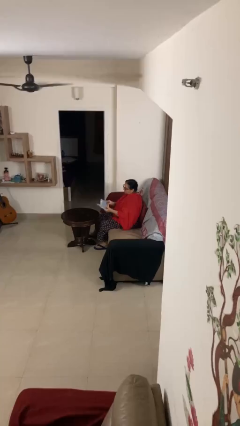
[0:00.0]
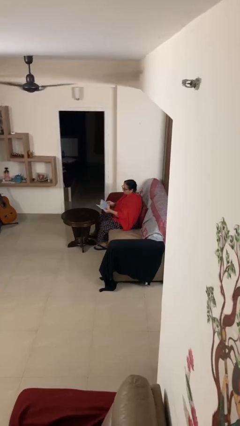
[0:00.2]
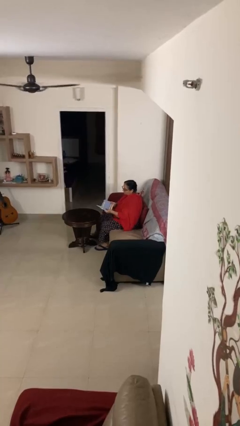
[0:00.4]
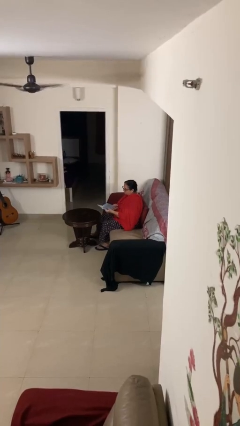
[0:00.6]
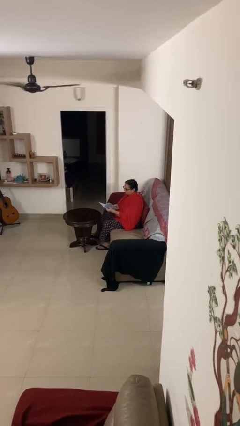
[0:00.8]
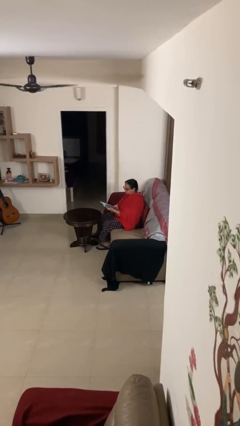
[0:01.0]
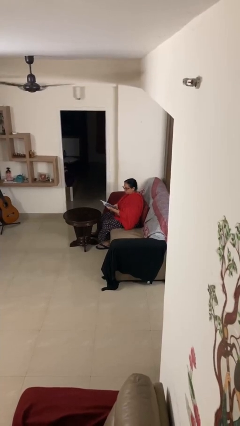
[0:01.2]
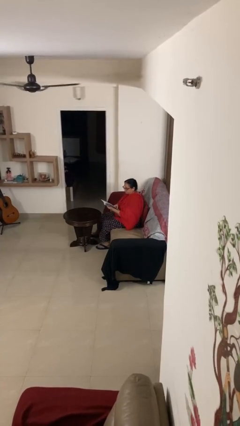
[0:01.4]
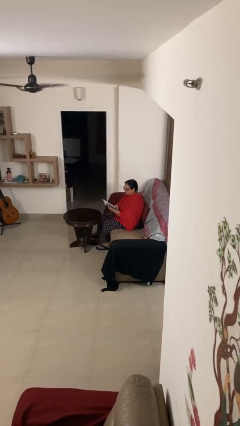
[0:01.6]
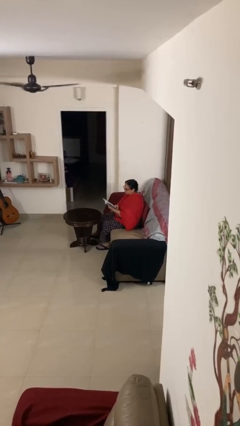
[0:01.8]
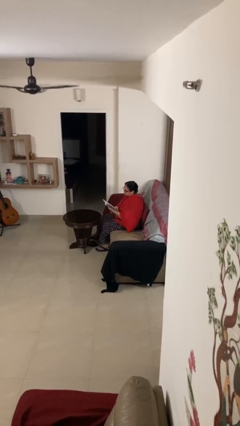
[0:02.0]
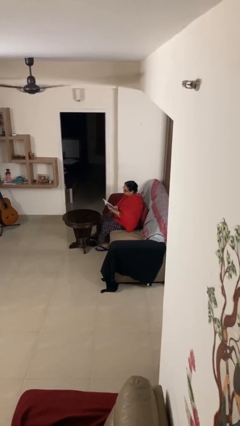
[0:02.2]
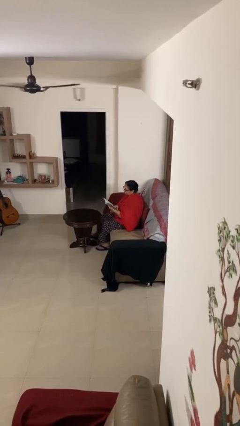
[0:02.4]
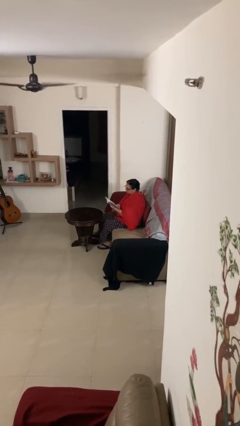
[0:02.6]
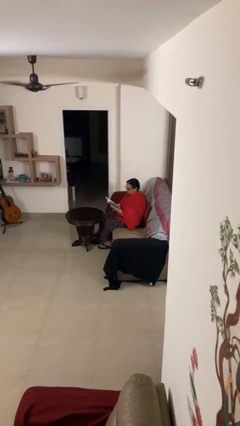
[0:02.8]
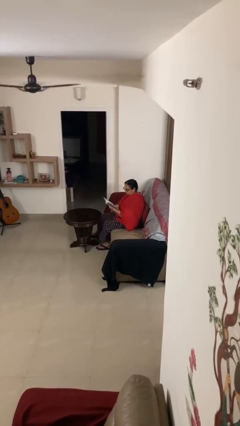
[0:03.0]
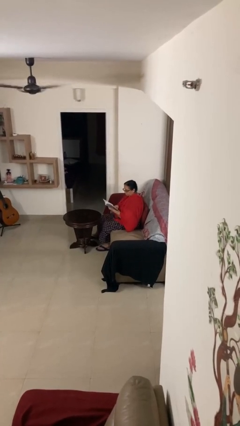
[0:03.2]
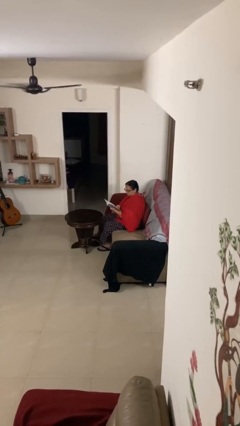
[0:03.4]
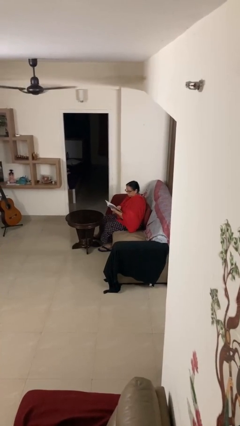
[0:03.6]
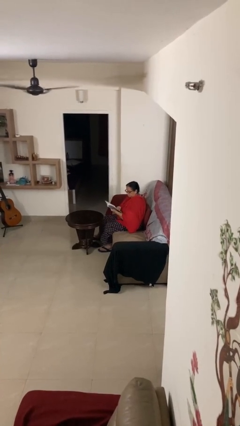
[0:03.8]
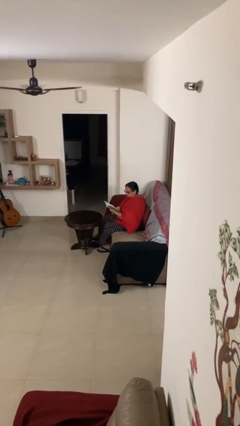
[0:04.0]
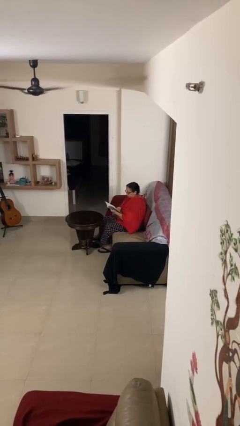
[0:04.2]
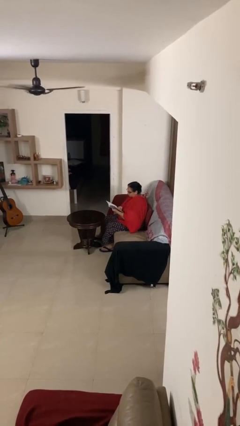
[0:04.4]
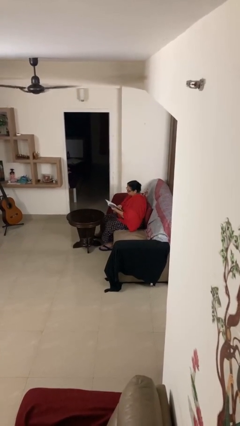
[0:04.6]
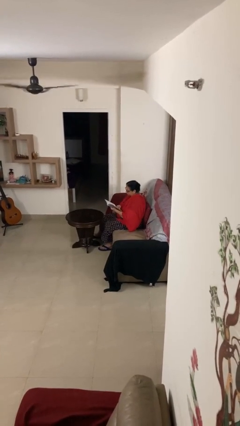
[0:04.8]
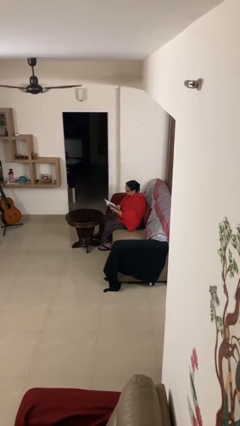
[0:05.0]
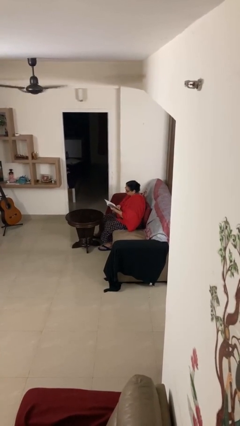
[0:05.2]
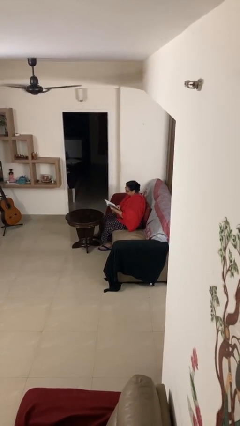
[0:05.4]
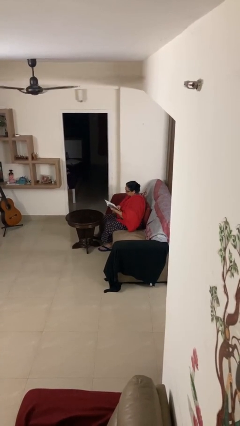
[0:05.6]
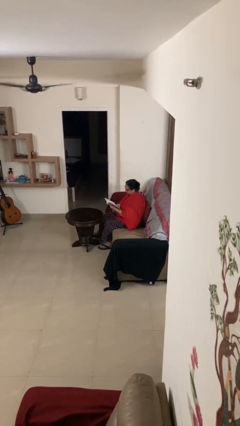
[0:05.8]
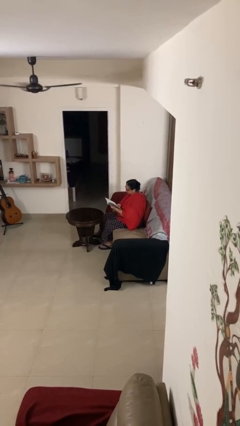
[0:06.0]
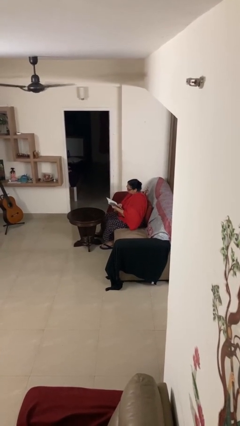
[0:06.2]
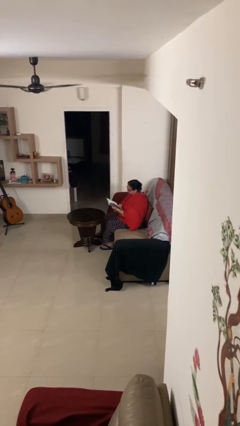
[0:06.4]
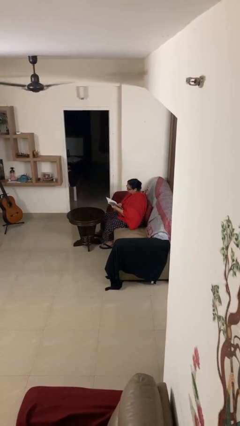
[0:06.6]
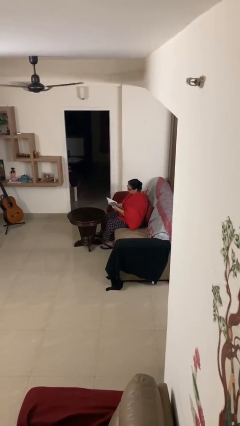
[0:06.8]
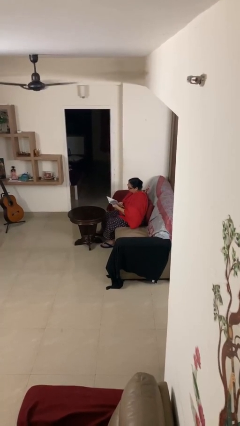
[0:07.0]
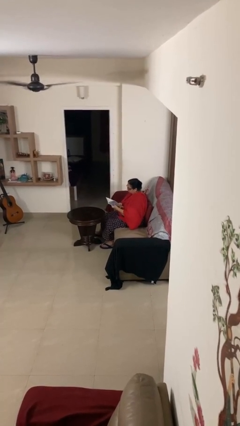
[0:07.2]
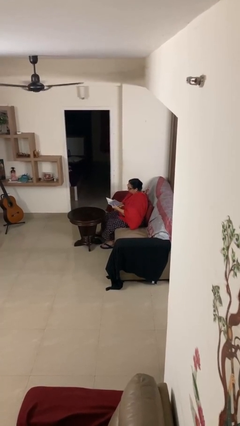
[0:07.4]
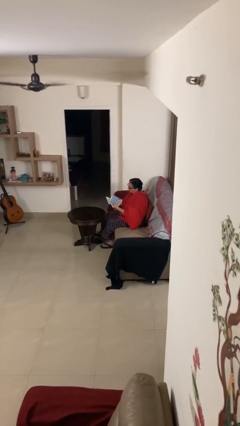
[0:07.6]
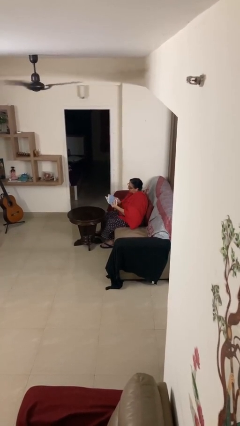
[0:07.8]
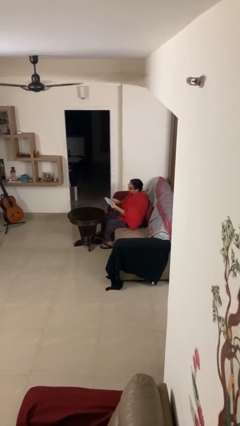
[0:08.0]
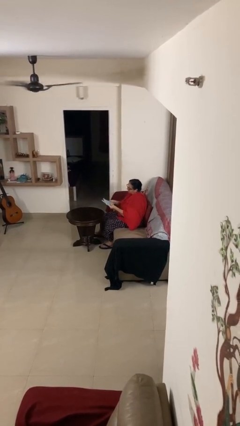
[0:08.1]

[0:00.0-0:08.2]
person reads document

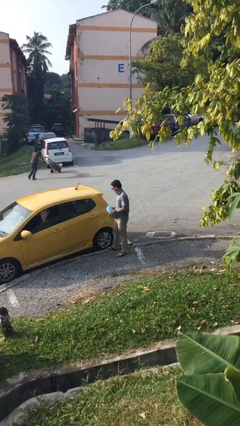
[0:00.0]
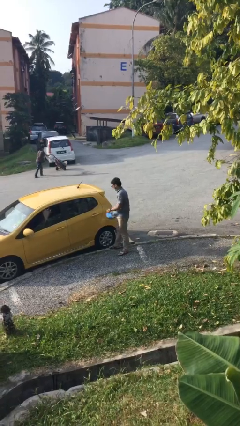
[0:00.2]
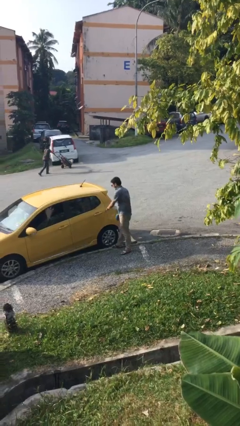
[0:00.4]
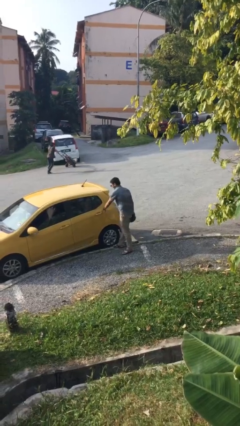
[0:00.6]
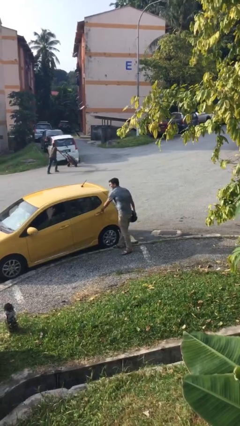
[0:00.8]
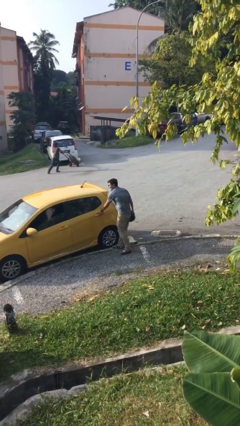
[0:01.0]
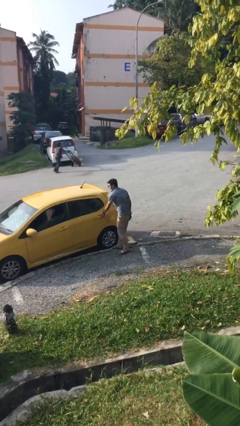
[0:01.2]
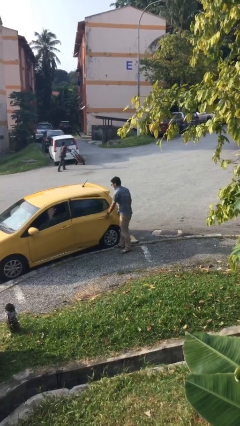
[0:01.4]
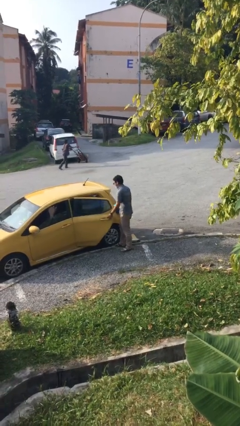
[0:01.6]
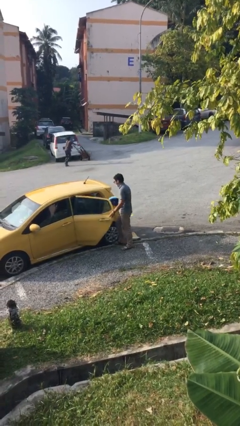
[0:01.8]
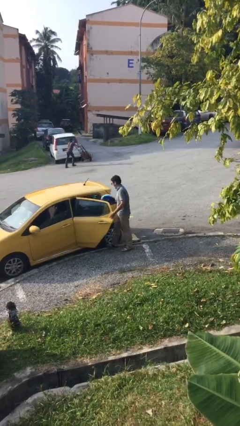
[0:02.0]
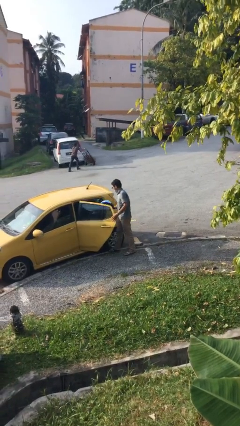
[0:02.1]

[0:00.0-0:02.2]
person opens car door

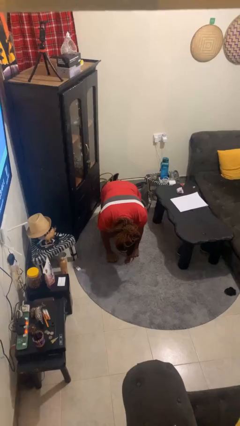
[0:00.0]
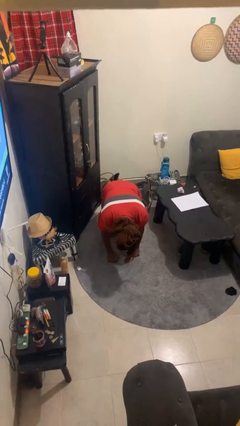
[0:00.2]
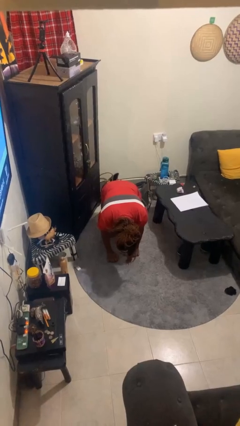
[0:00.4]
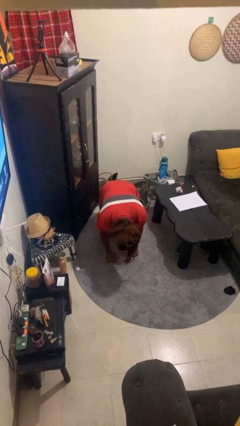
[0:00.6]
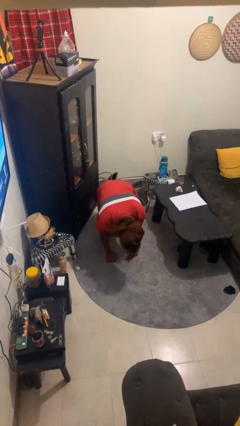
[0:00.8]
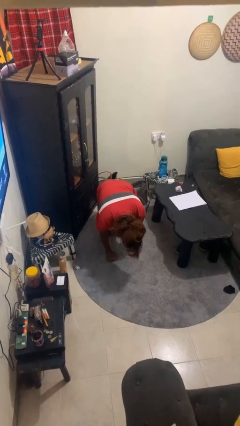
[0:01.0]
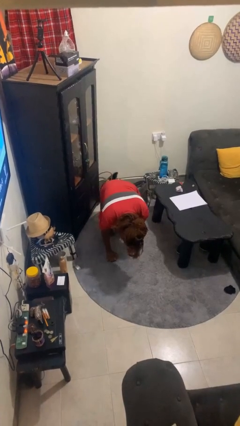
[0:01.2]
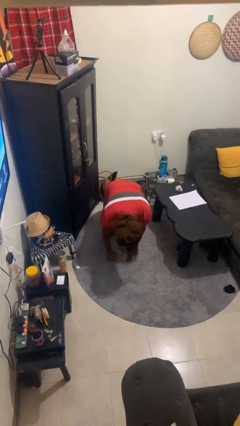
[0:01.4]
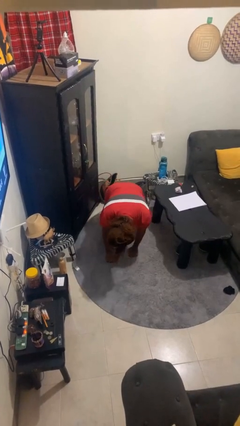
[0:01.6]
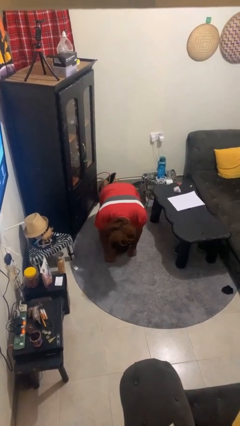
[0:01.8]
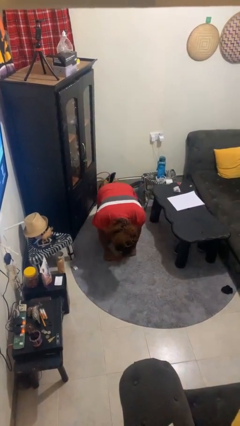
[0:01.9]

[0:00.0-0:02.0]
person crawls

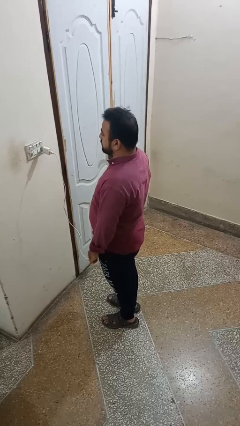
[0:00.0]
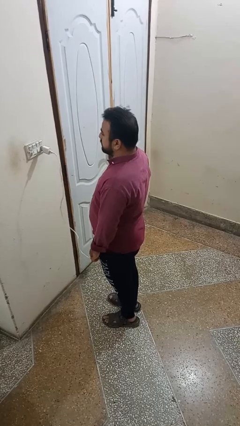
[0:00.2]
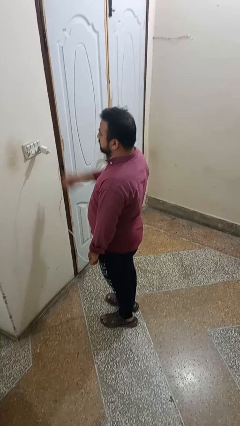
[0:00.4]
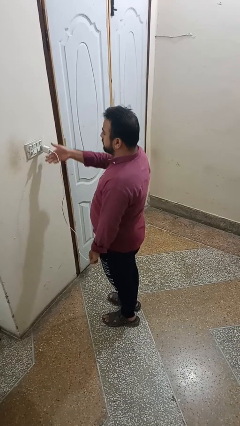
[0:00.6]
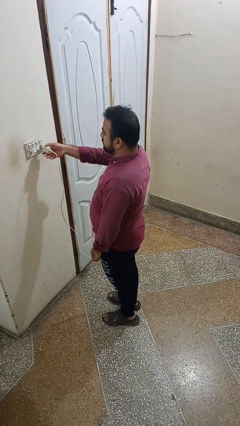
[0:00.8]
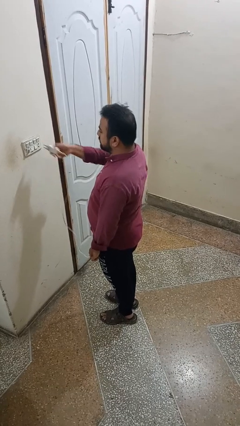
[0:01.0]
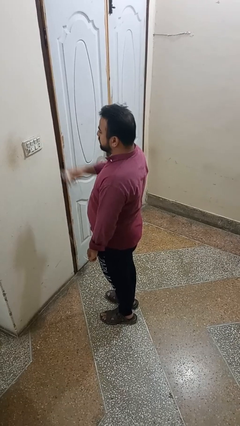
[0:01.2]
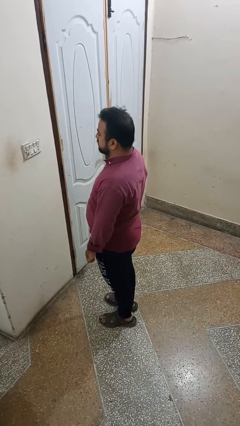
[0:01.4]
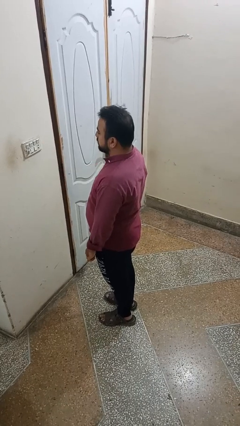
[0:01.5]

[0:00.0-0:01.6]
person unplugs from electrical socket

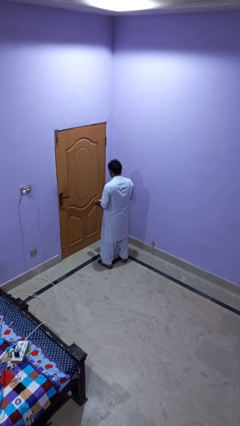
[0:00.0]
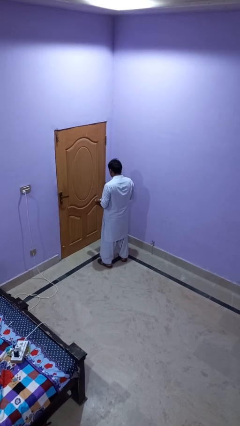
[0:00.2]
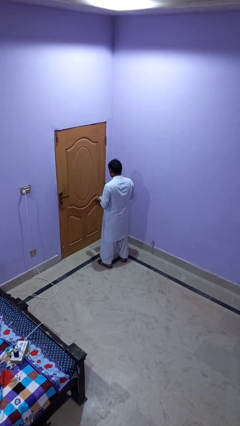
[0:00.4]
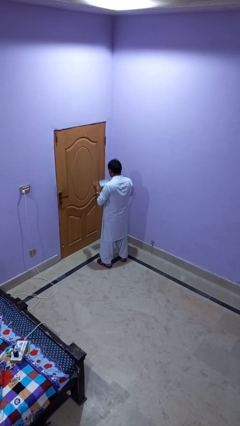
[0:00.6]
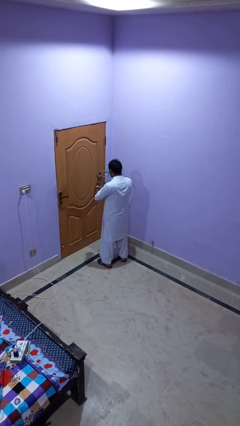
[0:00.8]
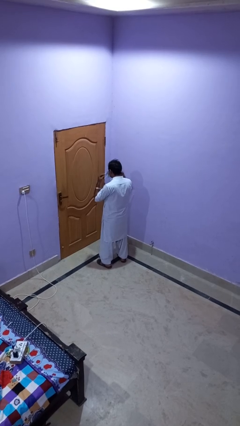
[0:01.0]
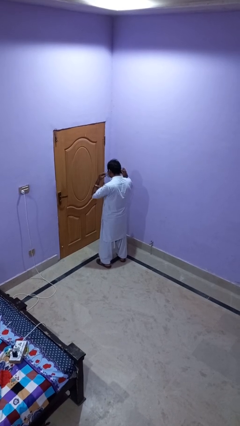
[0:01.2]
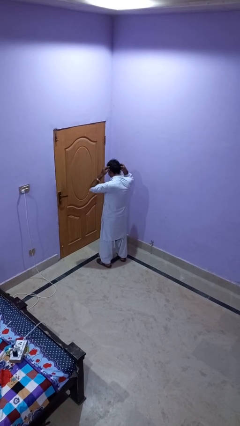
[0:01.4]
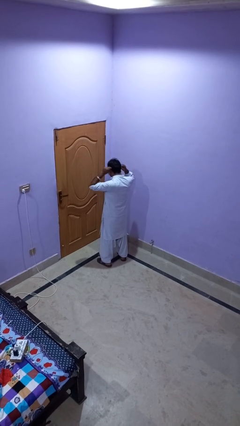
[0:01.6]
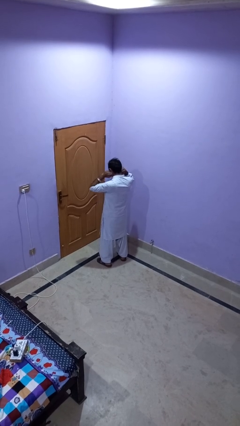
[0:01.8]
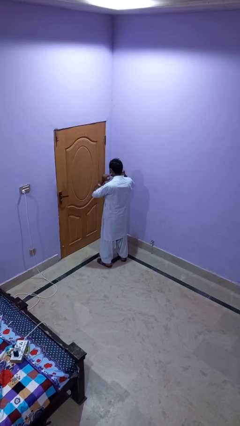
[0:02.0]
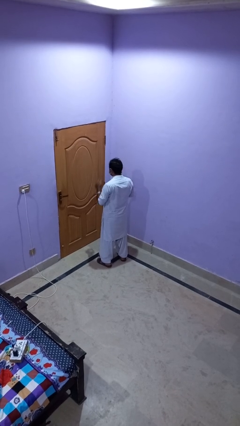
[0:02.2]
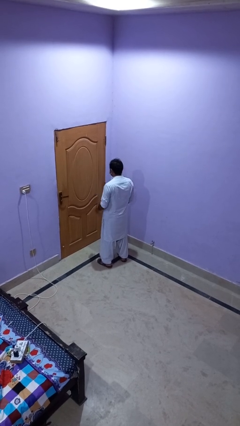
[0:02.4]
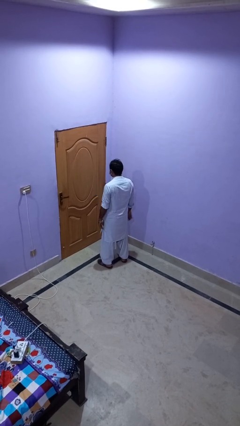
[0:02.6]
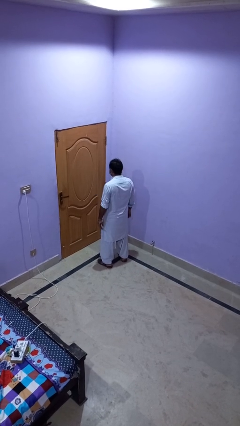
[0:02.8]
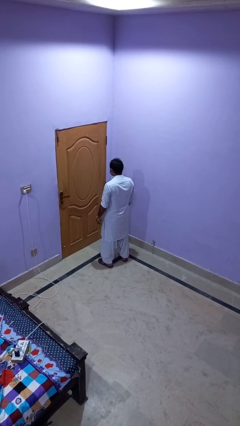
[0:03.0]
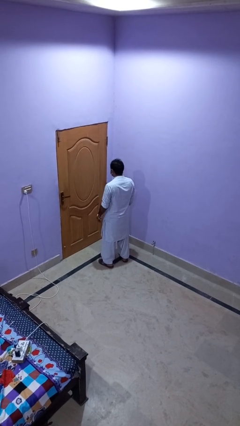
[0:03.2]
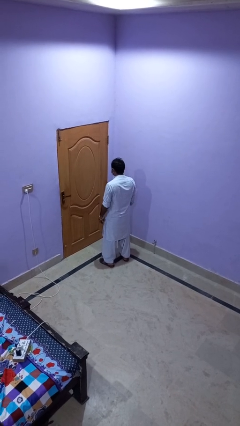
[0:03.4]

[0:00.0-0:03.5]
person puts on facemask

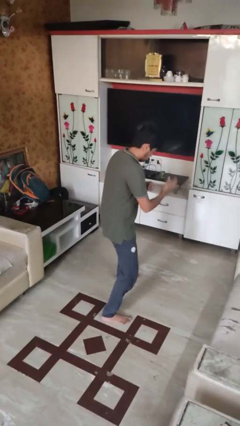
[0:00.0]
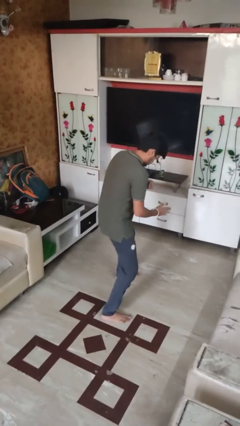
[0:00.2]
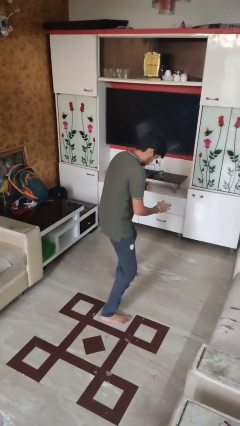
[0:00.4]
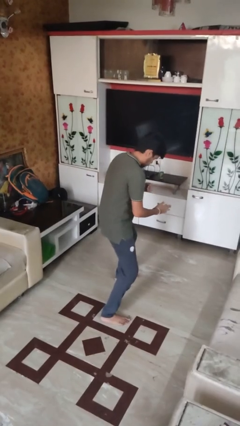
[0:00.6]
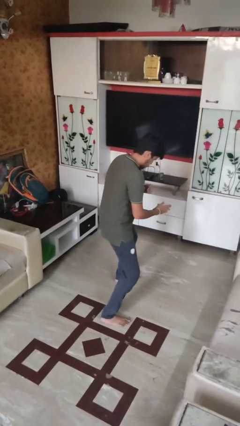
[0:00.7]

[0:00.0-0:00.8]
person karate chop
